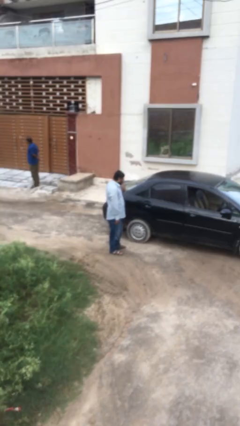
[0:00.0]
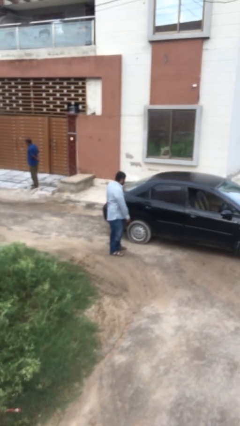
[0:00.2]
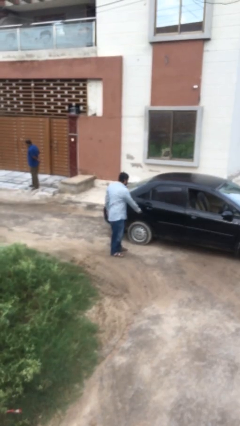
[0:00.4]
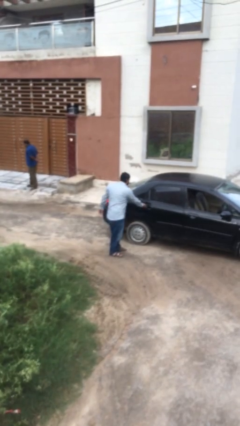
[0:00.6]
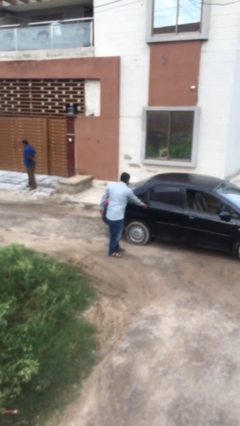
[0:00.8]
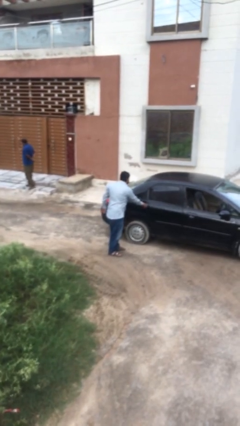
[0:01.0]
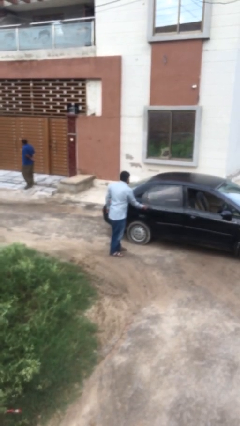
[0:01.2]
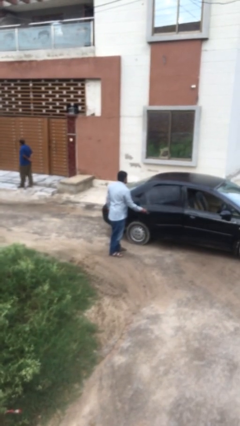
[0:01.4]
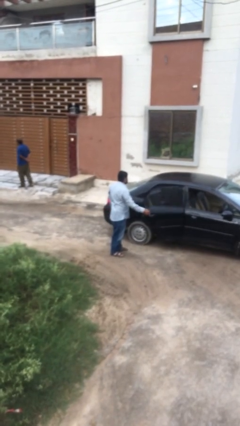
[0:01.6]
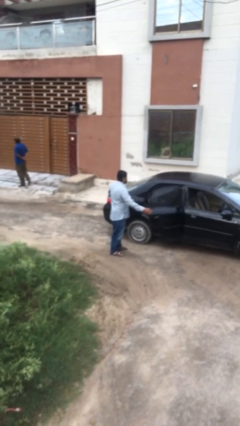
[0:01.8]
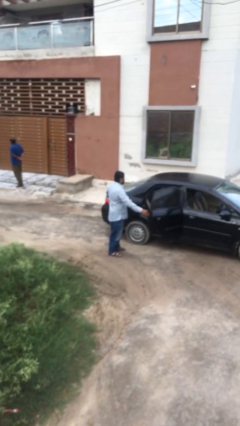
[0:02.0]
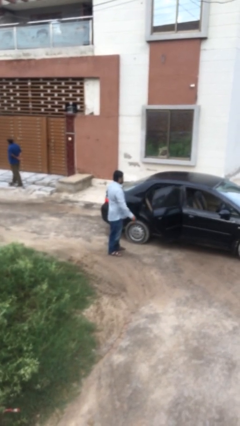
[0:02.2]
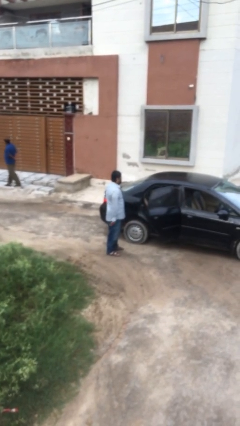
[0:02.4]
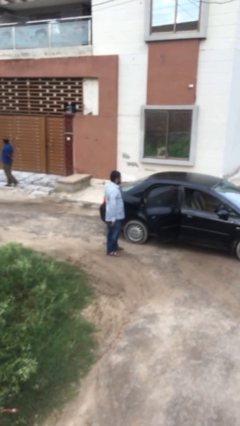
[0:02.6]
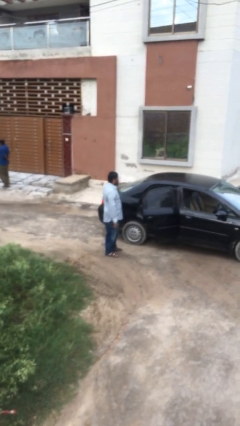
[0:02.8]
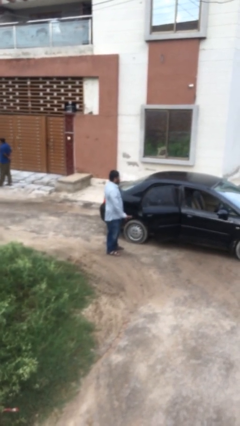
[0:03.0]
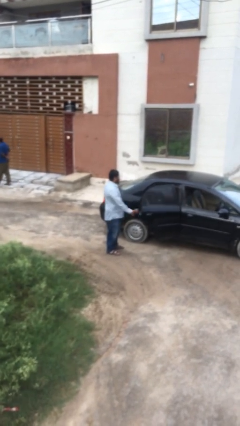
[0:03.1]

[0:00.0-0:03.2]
person opens car door

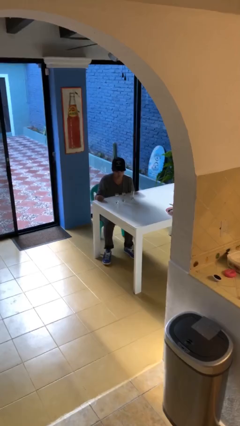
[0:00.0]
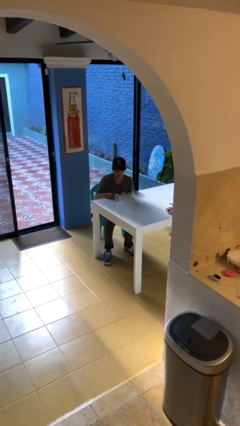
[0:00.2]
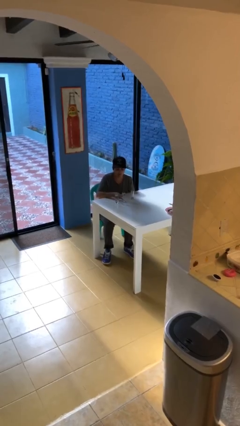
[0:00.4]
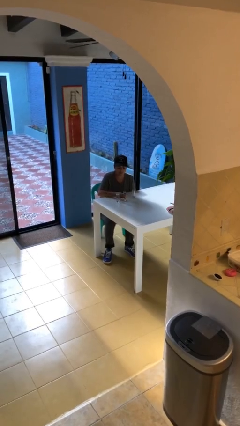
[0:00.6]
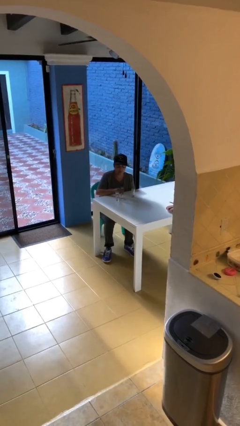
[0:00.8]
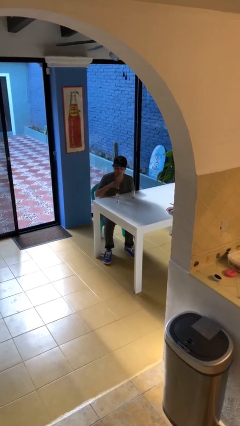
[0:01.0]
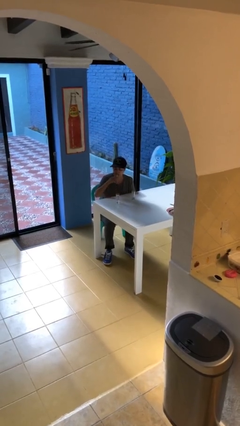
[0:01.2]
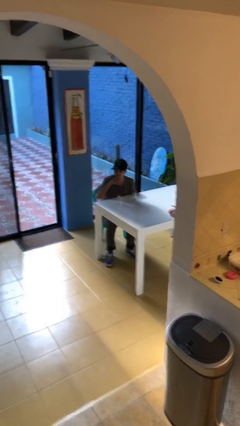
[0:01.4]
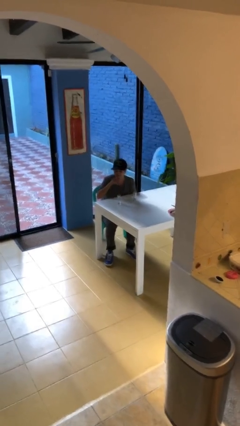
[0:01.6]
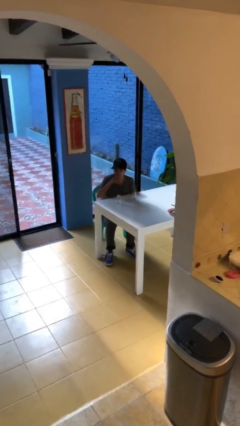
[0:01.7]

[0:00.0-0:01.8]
person picks up object from table

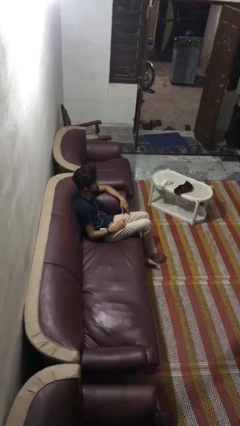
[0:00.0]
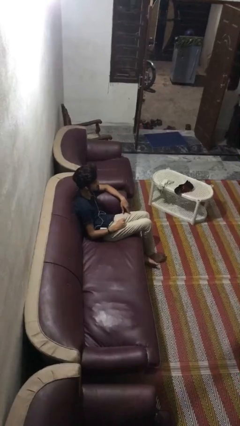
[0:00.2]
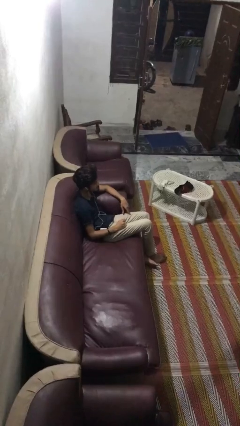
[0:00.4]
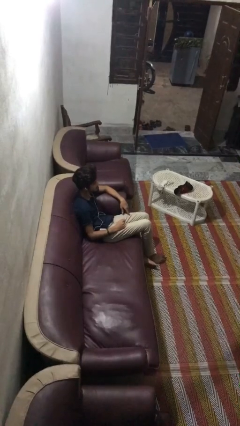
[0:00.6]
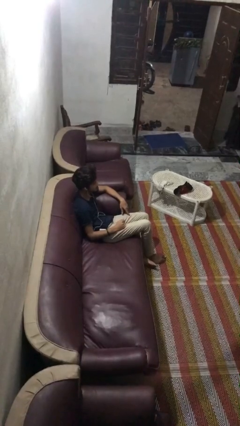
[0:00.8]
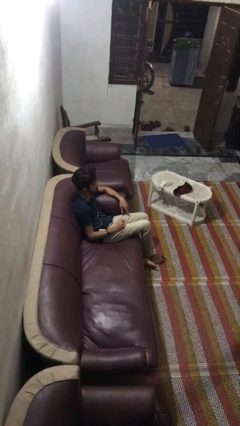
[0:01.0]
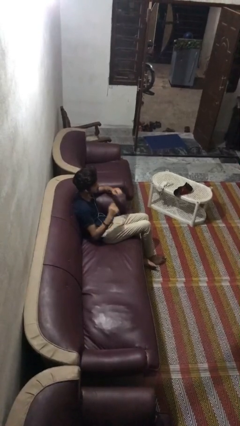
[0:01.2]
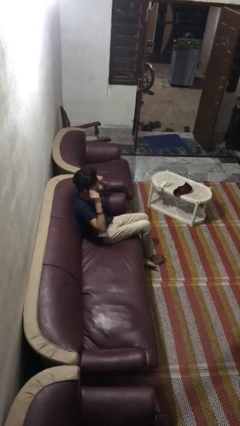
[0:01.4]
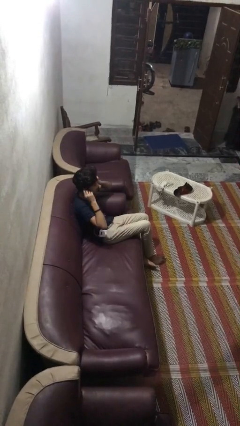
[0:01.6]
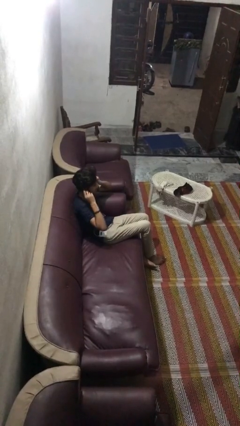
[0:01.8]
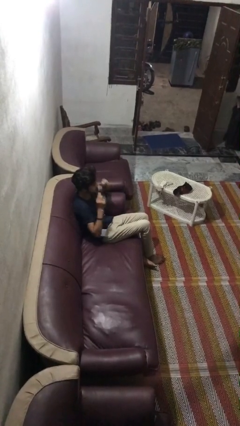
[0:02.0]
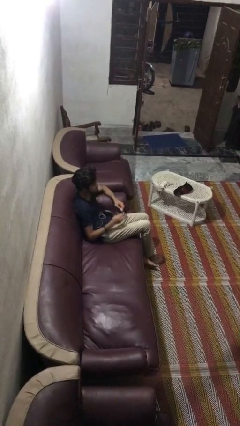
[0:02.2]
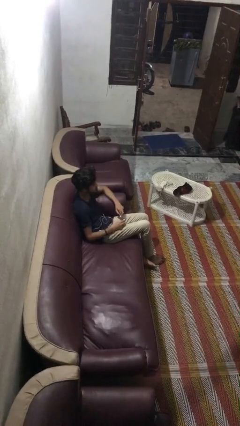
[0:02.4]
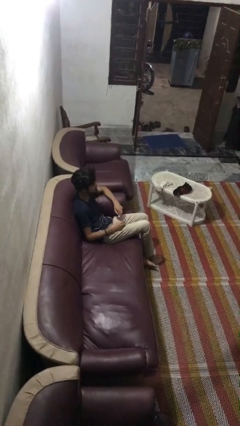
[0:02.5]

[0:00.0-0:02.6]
person takes off headphones

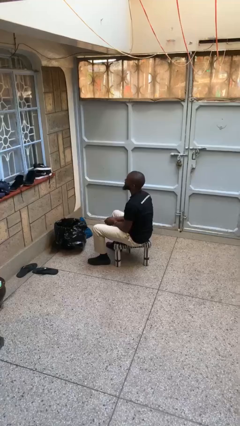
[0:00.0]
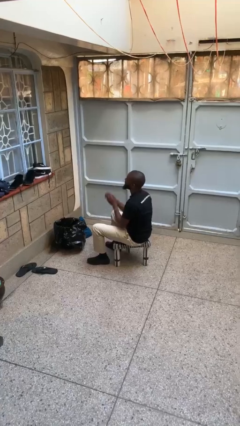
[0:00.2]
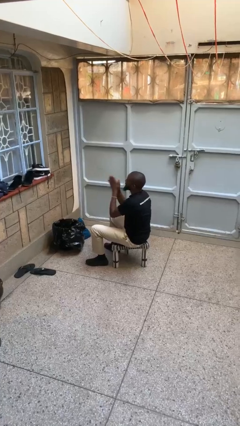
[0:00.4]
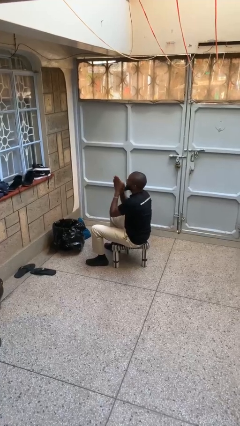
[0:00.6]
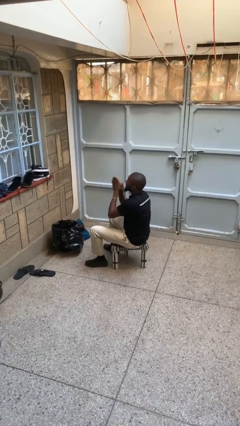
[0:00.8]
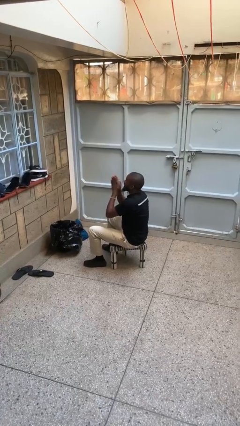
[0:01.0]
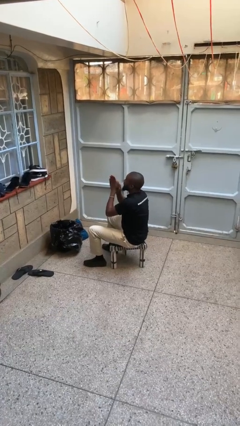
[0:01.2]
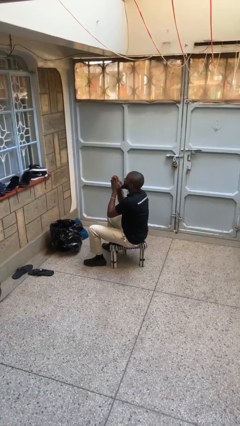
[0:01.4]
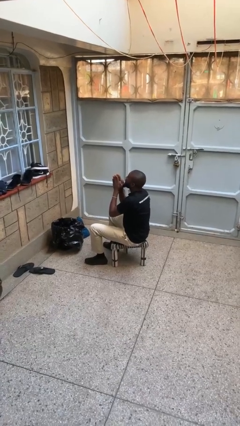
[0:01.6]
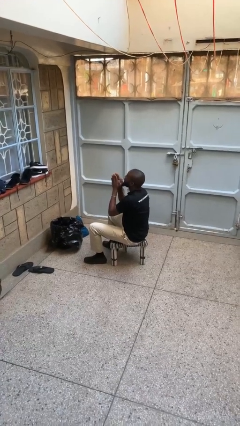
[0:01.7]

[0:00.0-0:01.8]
person blows into hands

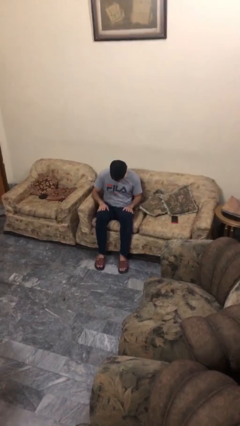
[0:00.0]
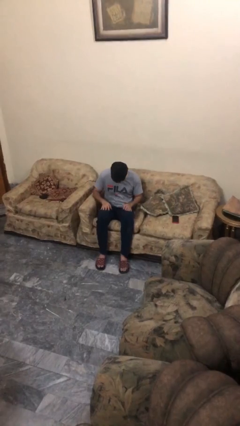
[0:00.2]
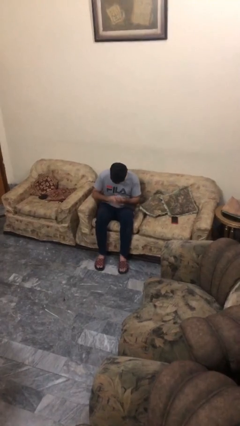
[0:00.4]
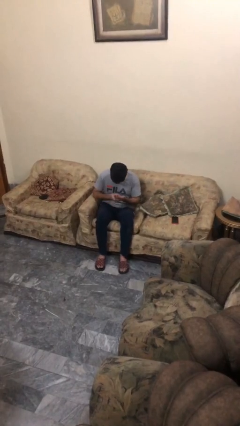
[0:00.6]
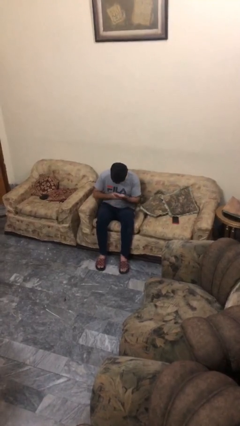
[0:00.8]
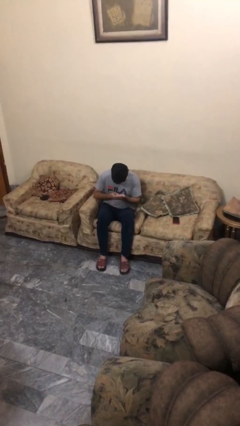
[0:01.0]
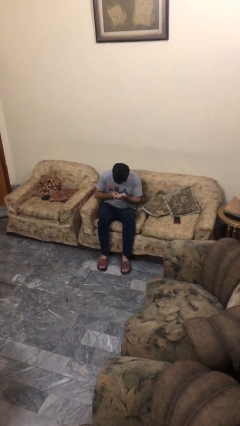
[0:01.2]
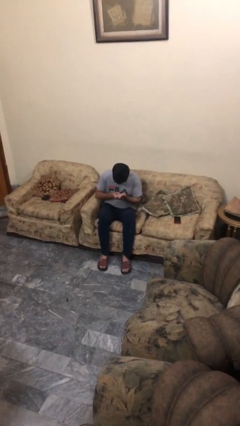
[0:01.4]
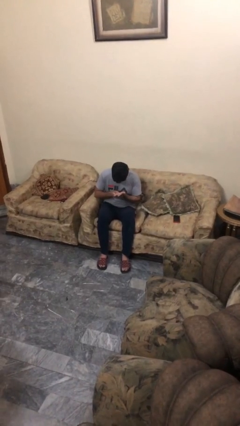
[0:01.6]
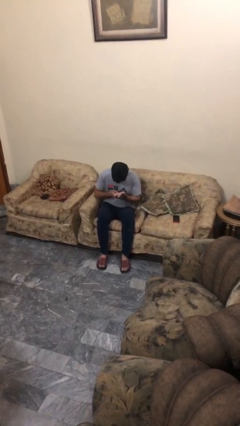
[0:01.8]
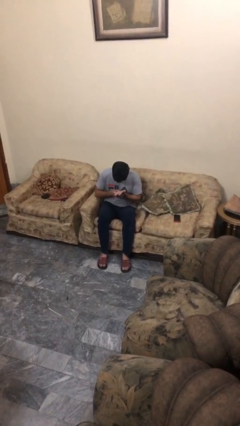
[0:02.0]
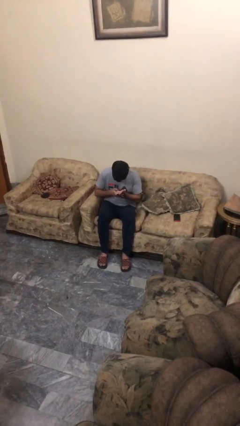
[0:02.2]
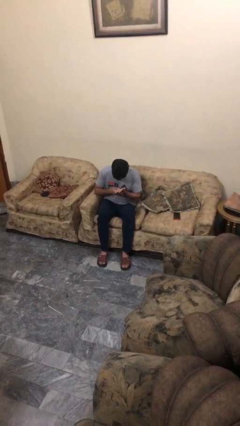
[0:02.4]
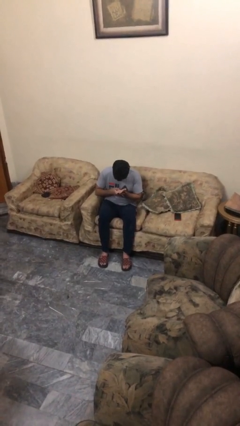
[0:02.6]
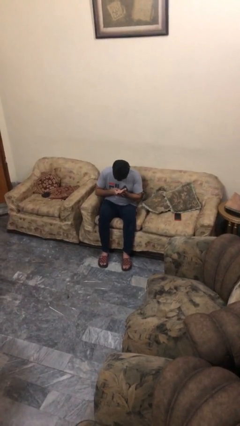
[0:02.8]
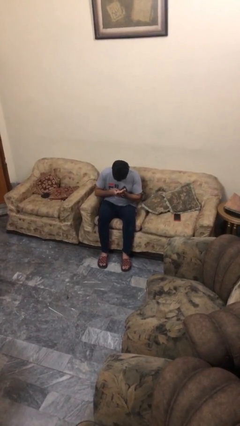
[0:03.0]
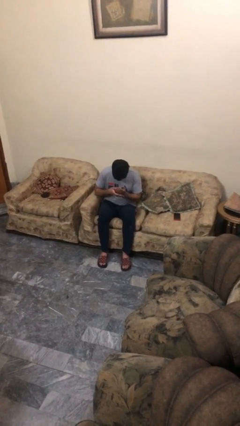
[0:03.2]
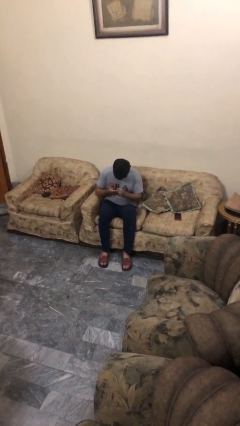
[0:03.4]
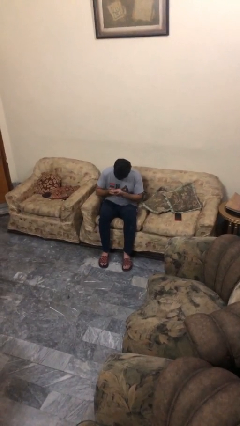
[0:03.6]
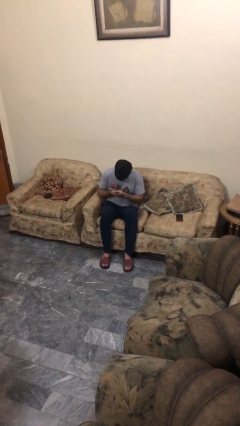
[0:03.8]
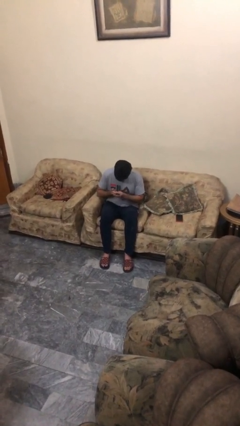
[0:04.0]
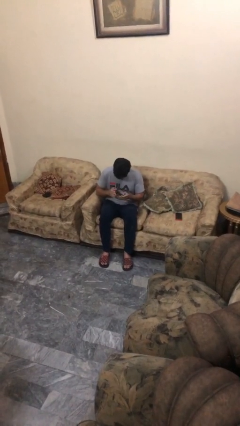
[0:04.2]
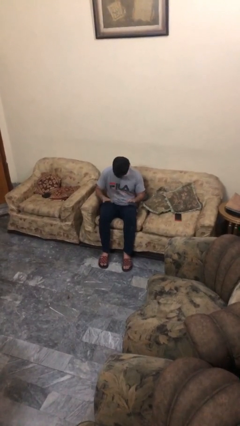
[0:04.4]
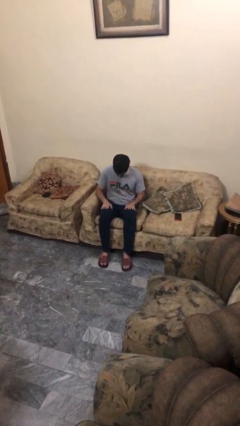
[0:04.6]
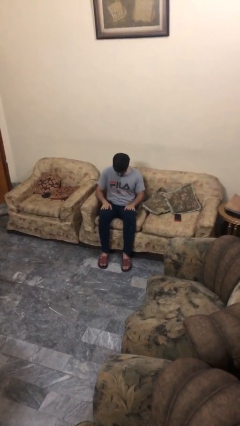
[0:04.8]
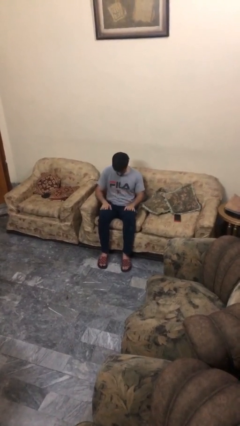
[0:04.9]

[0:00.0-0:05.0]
person looks at hands in lap

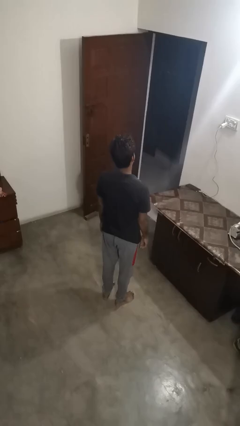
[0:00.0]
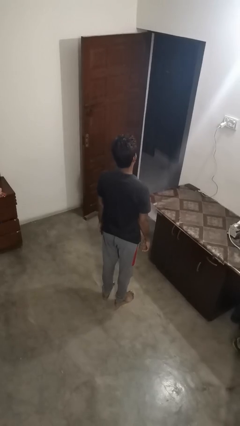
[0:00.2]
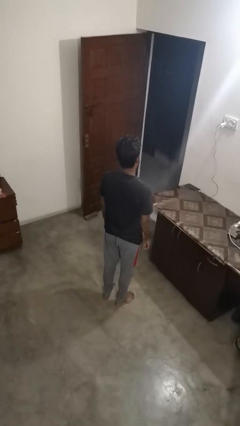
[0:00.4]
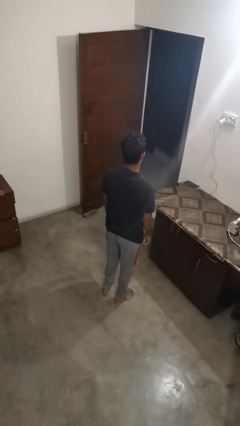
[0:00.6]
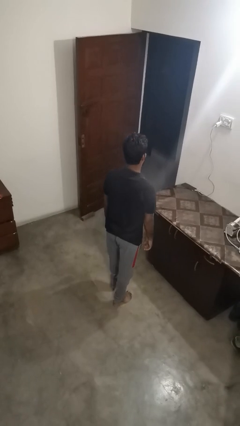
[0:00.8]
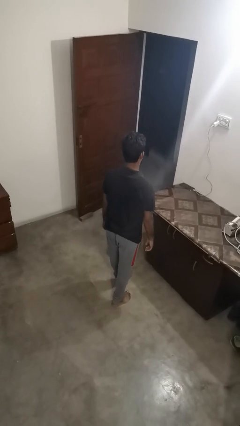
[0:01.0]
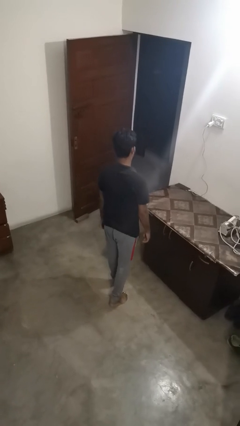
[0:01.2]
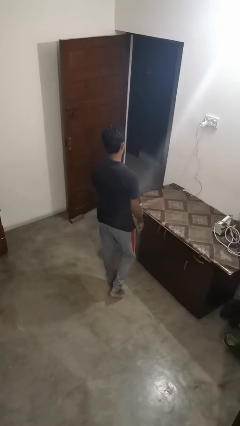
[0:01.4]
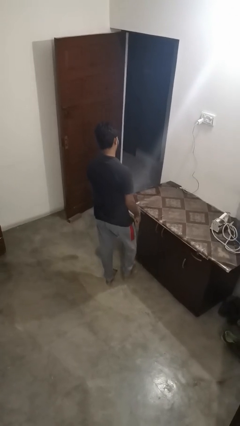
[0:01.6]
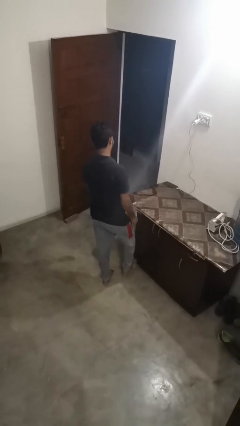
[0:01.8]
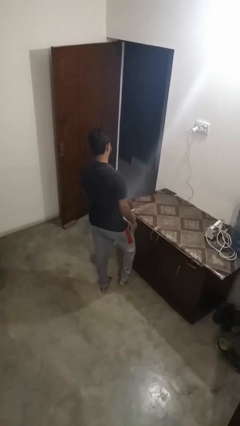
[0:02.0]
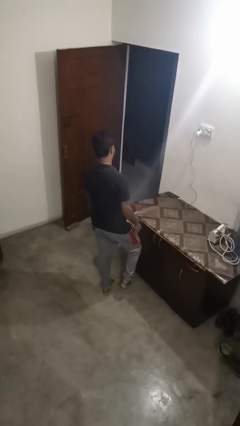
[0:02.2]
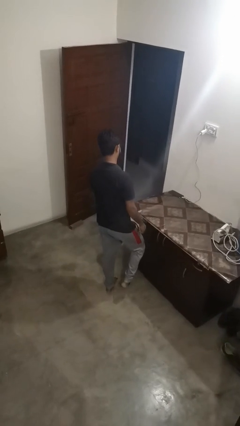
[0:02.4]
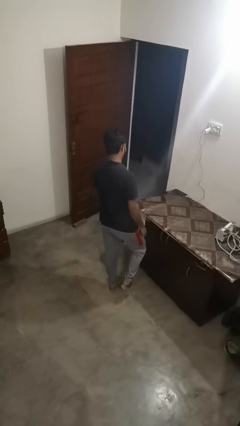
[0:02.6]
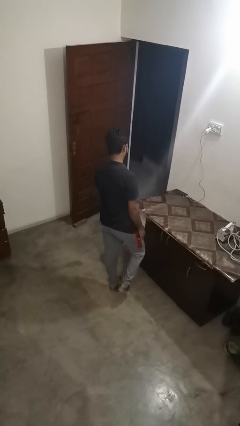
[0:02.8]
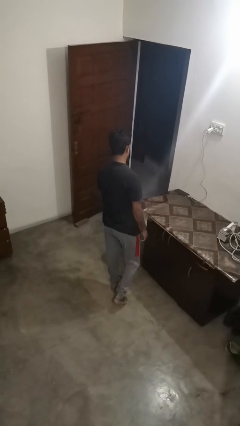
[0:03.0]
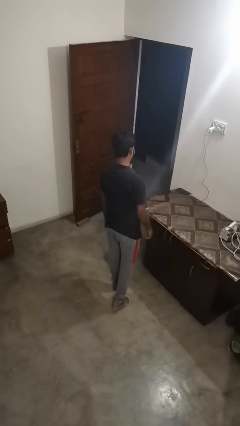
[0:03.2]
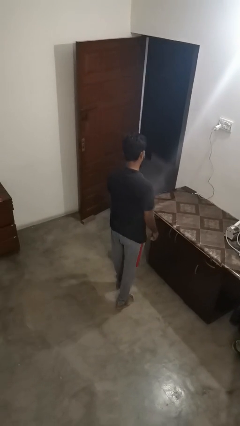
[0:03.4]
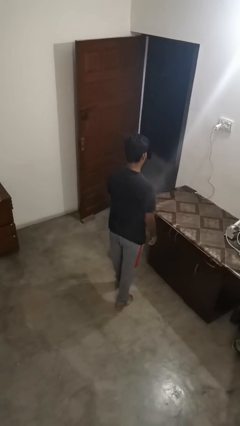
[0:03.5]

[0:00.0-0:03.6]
person bumps into table
